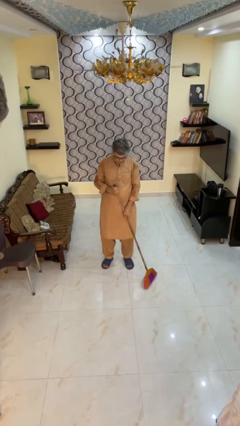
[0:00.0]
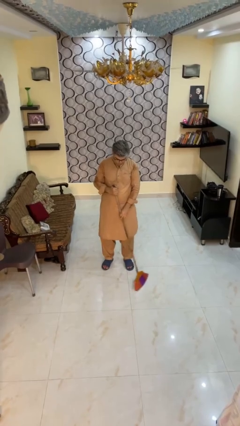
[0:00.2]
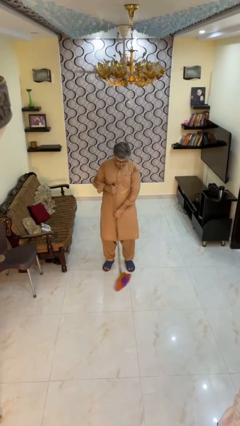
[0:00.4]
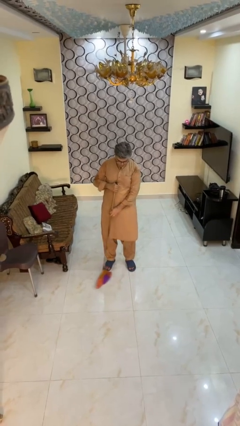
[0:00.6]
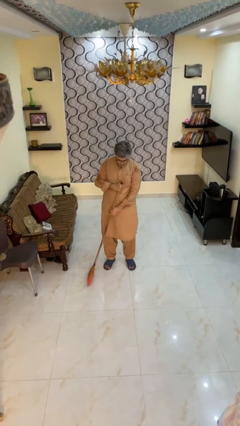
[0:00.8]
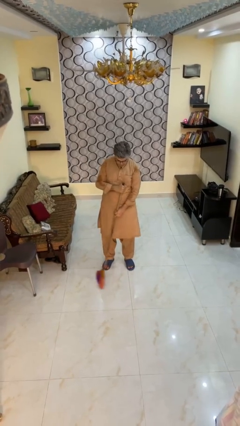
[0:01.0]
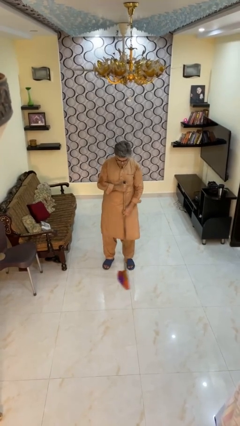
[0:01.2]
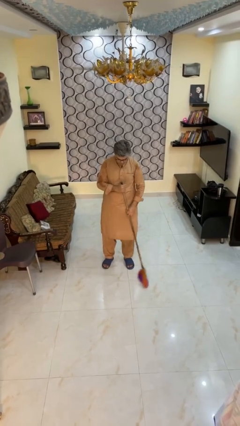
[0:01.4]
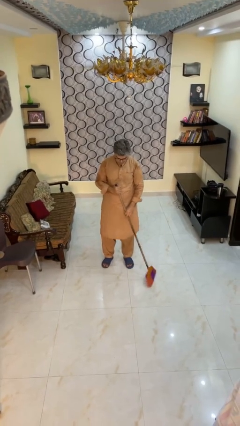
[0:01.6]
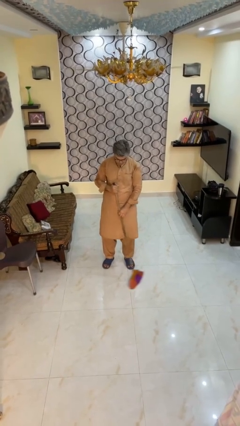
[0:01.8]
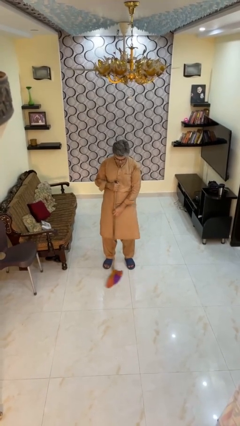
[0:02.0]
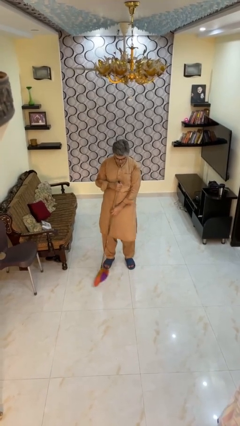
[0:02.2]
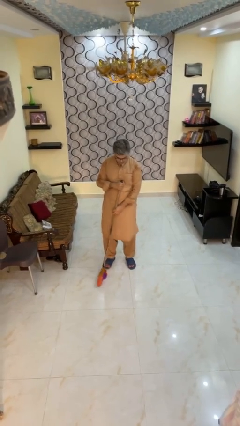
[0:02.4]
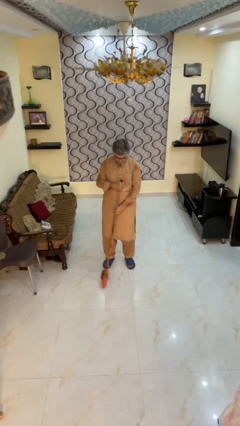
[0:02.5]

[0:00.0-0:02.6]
person mops

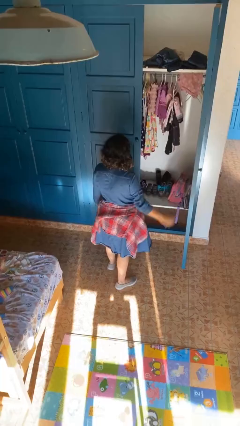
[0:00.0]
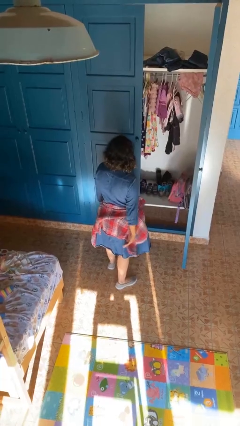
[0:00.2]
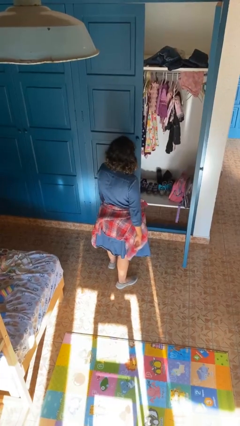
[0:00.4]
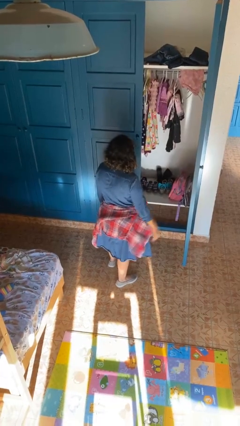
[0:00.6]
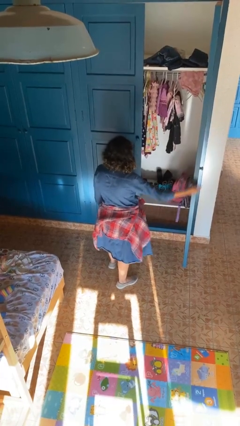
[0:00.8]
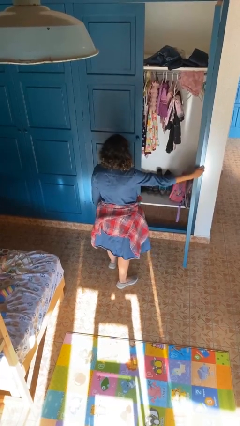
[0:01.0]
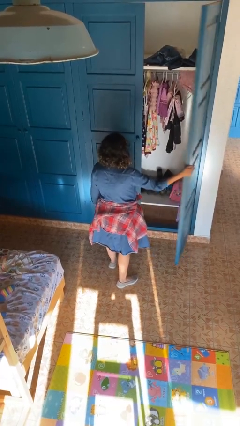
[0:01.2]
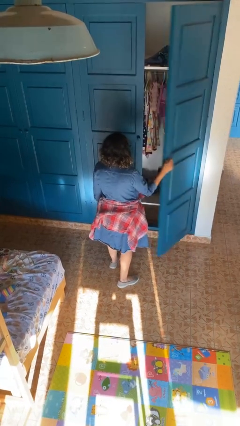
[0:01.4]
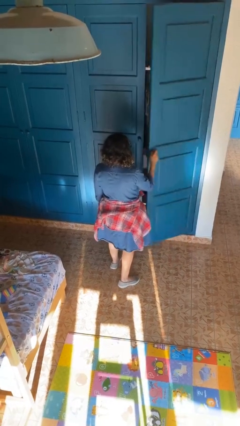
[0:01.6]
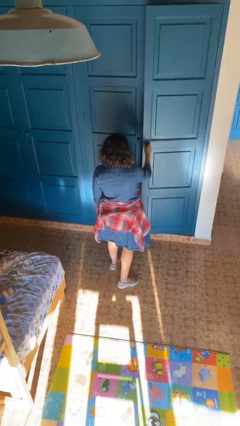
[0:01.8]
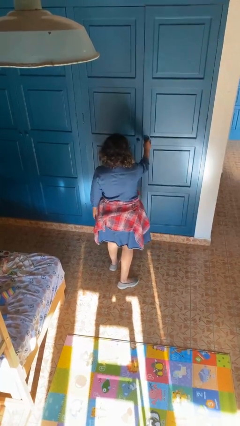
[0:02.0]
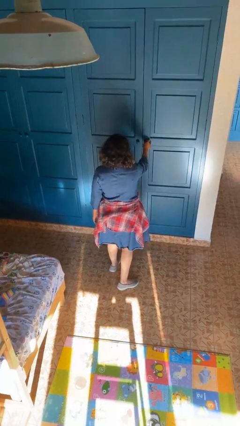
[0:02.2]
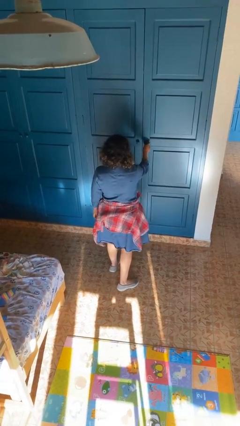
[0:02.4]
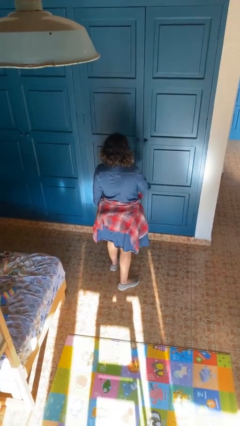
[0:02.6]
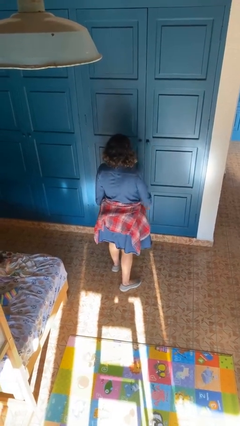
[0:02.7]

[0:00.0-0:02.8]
person closes closet door

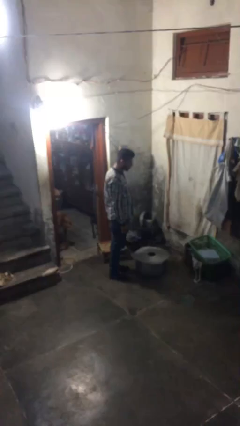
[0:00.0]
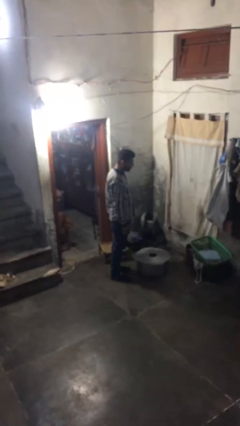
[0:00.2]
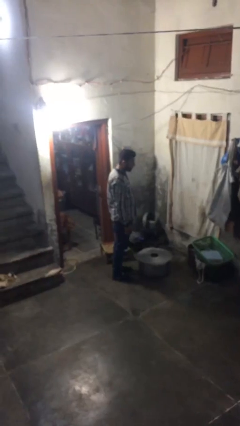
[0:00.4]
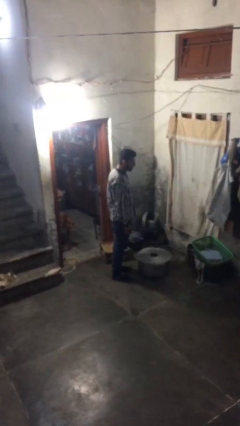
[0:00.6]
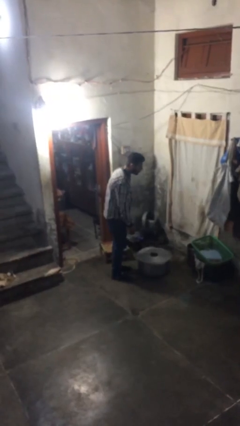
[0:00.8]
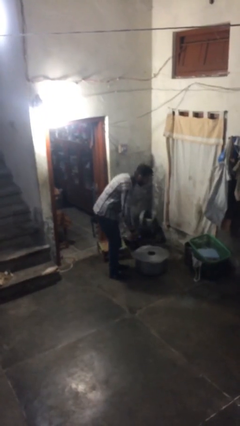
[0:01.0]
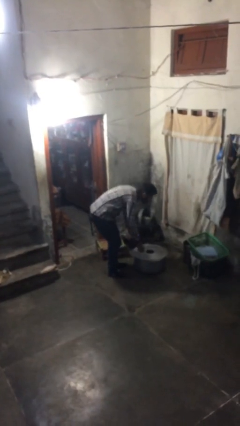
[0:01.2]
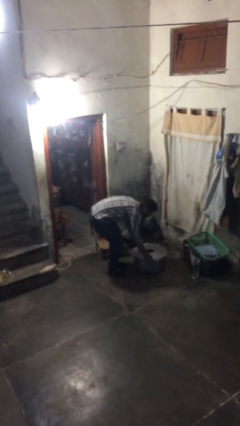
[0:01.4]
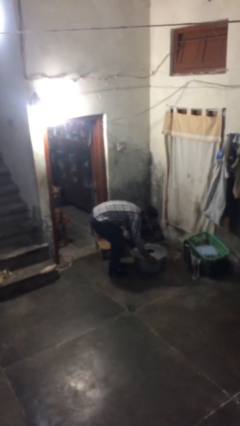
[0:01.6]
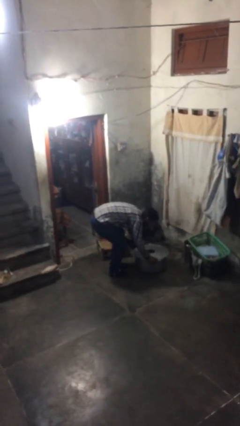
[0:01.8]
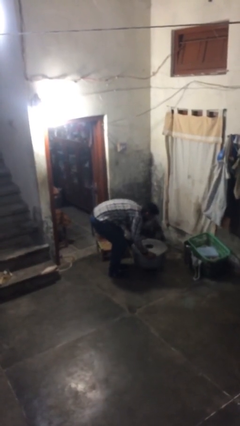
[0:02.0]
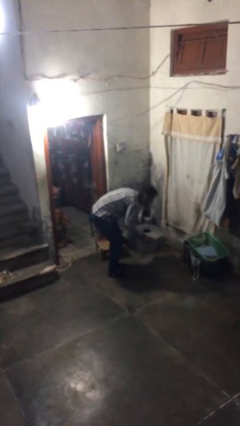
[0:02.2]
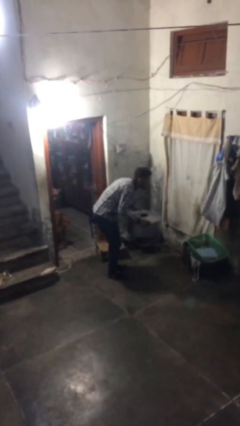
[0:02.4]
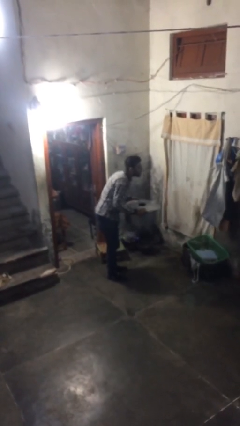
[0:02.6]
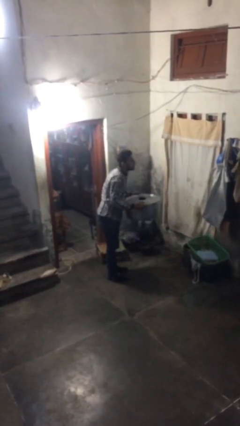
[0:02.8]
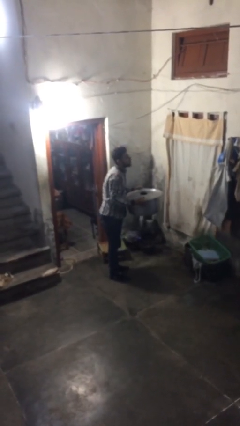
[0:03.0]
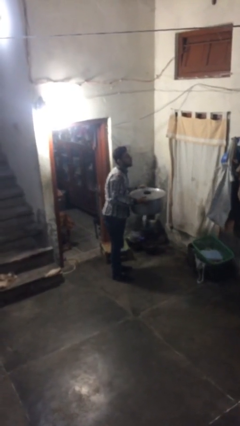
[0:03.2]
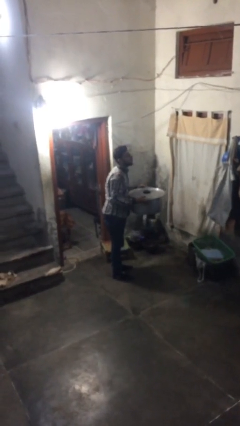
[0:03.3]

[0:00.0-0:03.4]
person picks up object from floor

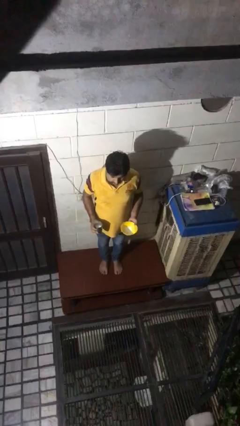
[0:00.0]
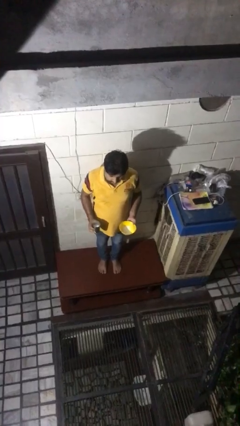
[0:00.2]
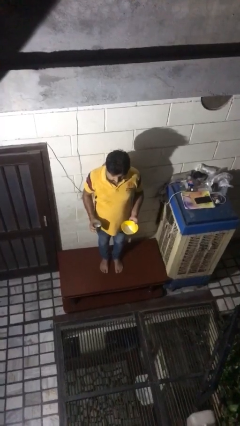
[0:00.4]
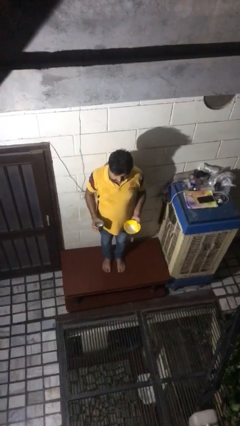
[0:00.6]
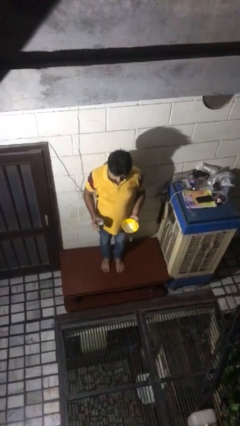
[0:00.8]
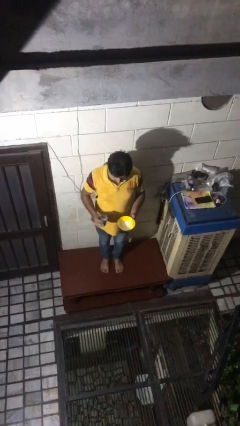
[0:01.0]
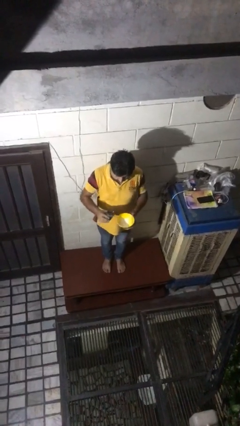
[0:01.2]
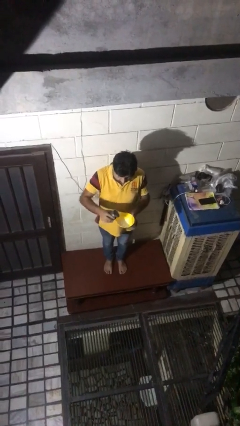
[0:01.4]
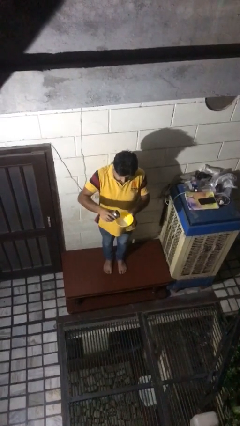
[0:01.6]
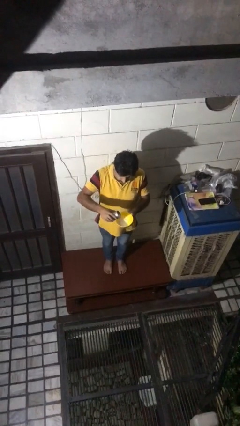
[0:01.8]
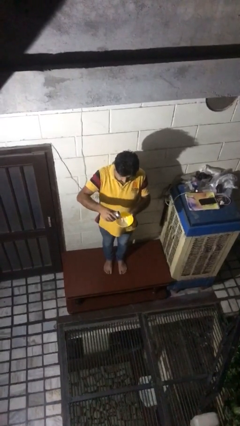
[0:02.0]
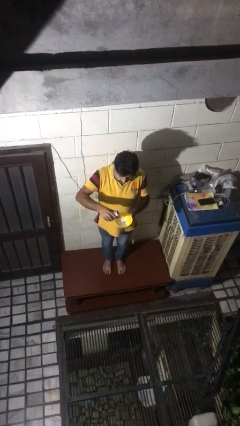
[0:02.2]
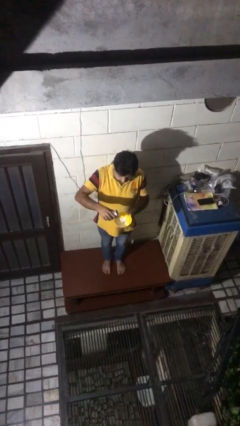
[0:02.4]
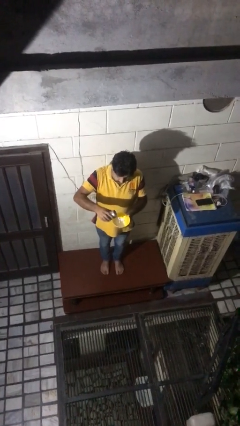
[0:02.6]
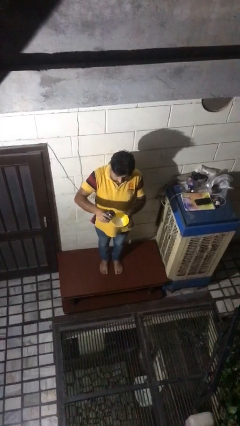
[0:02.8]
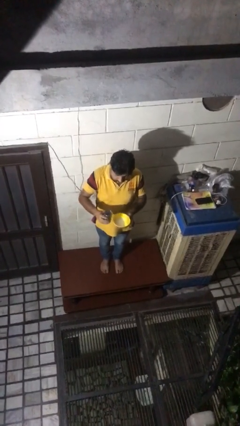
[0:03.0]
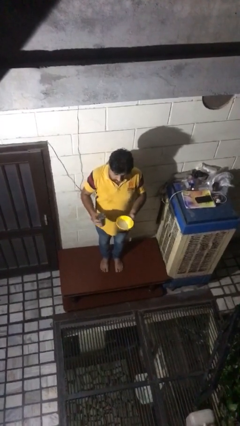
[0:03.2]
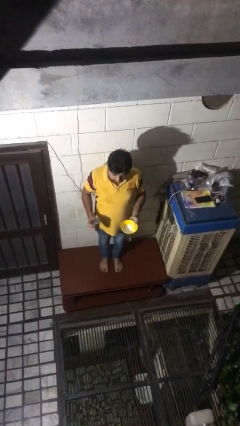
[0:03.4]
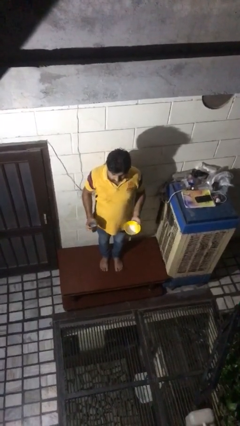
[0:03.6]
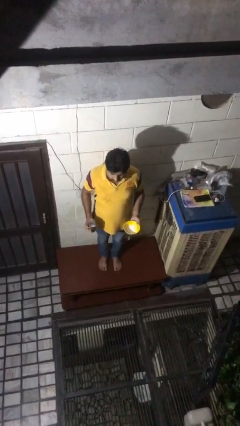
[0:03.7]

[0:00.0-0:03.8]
person pours into bowl

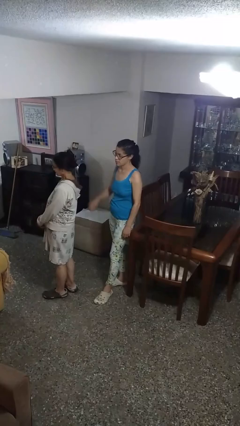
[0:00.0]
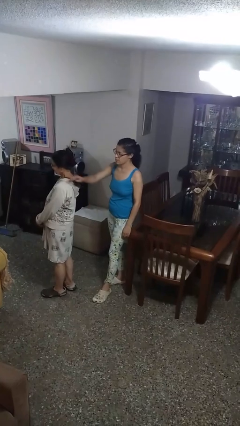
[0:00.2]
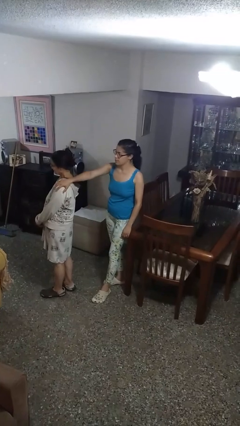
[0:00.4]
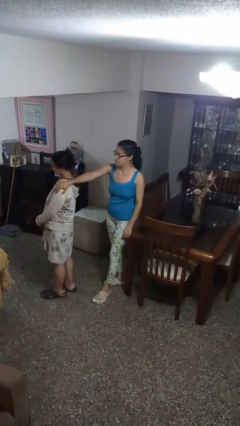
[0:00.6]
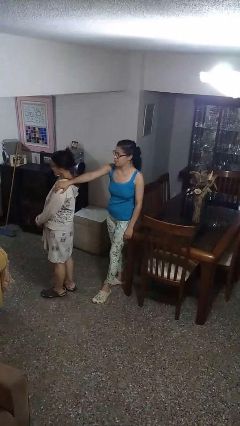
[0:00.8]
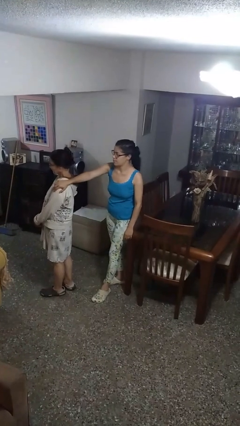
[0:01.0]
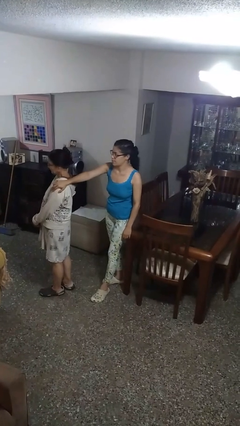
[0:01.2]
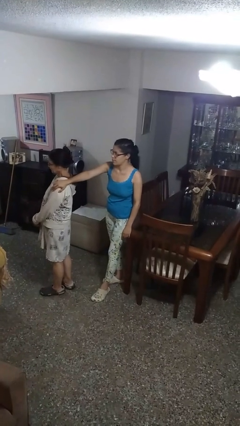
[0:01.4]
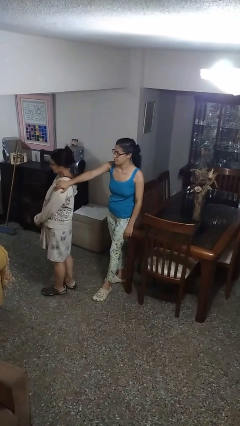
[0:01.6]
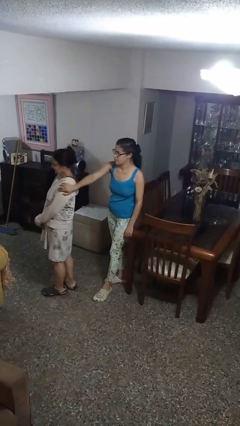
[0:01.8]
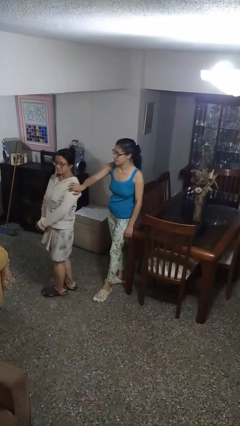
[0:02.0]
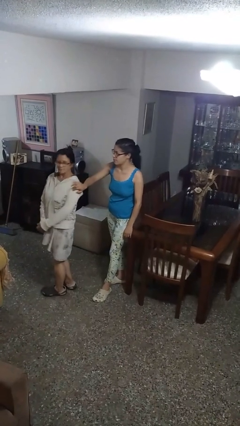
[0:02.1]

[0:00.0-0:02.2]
person grabs person by shoulder

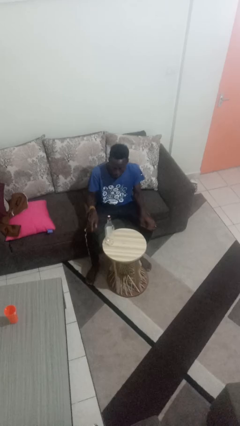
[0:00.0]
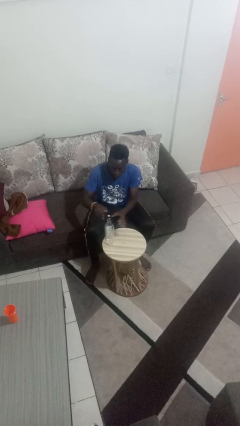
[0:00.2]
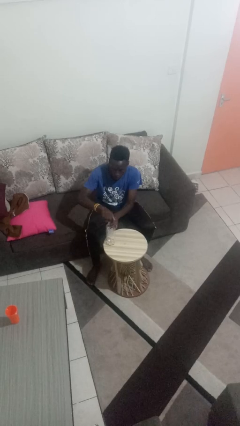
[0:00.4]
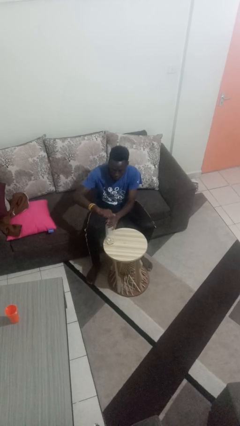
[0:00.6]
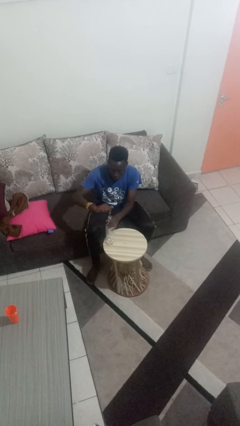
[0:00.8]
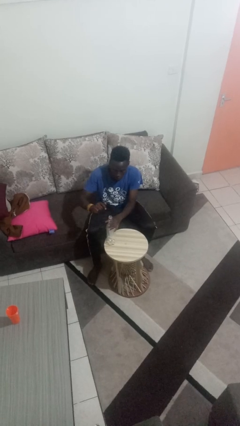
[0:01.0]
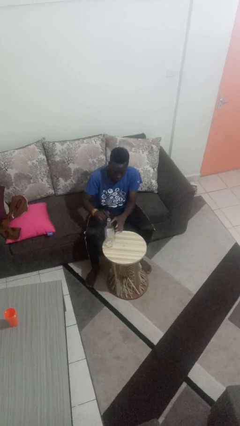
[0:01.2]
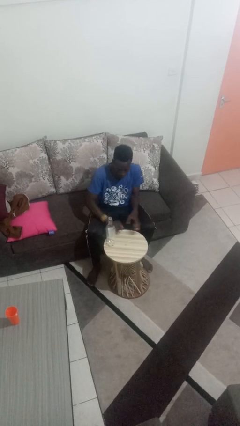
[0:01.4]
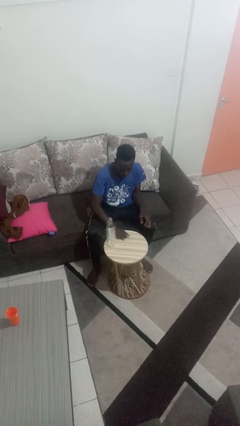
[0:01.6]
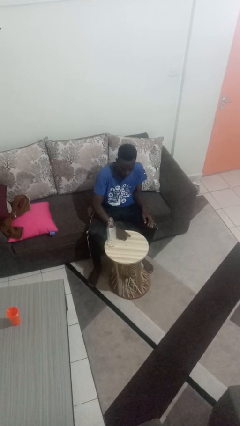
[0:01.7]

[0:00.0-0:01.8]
person unscrews lid from bottle

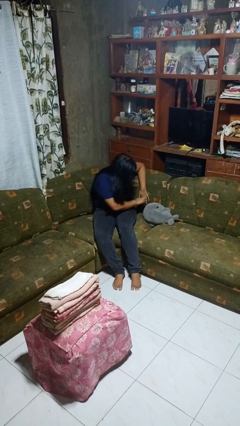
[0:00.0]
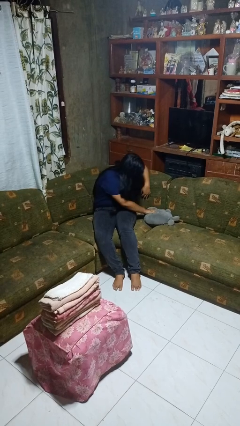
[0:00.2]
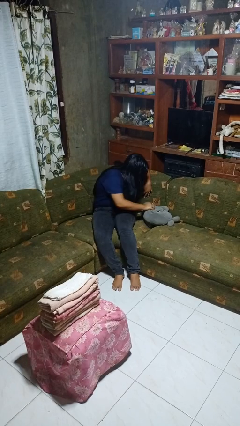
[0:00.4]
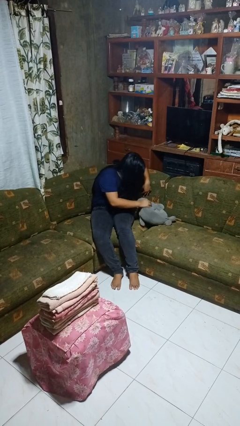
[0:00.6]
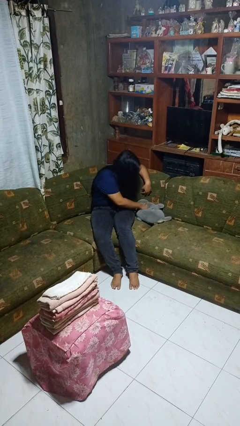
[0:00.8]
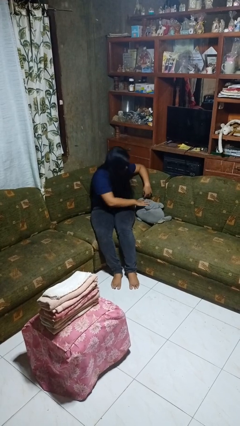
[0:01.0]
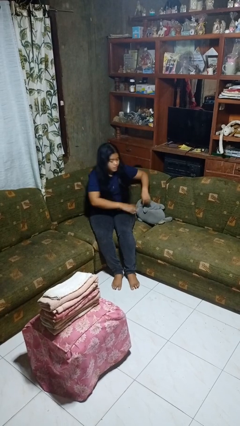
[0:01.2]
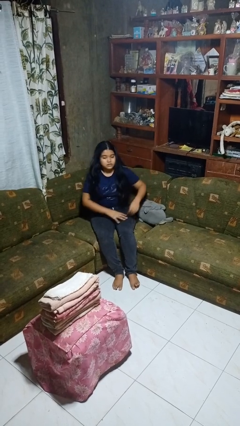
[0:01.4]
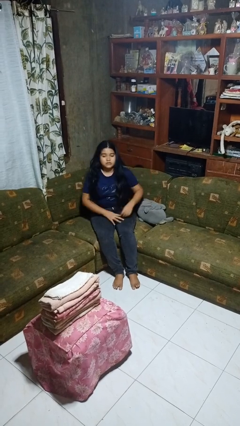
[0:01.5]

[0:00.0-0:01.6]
person searches in couch
